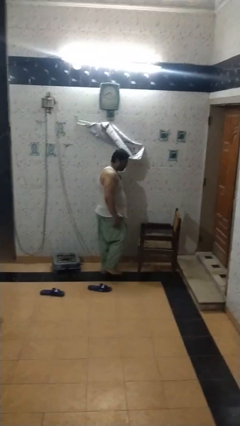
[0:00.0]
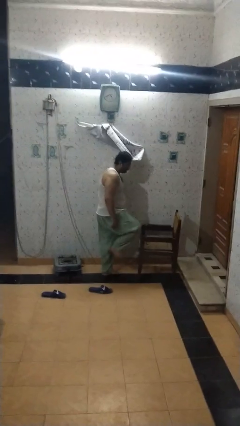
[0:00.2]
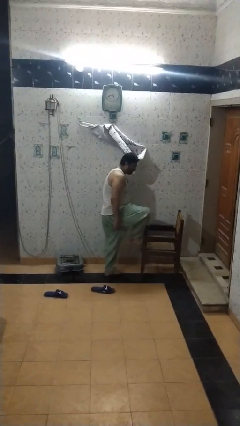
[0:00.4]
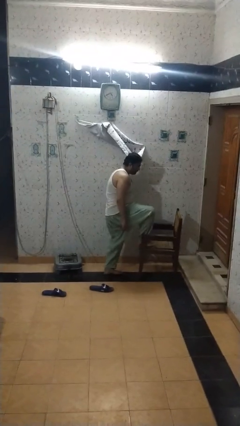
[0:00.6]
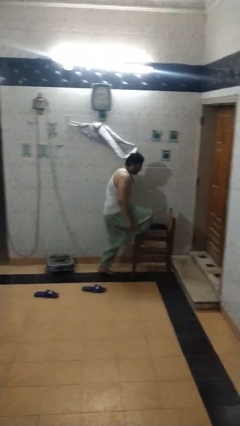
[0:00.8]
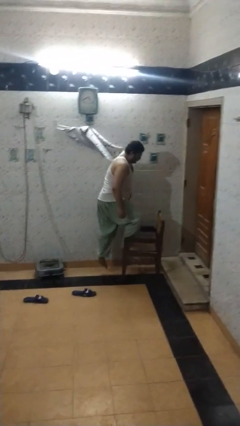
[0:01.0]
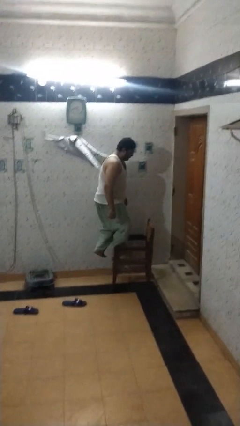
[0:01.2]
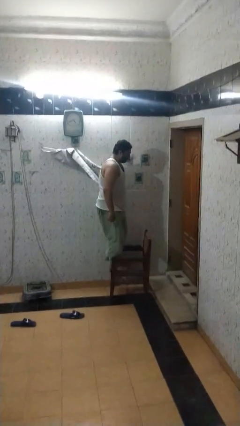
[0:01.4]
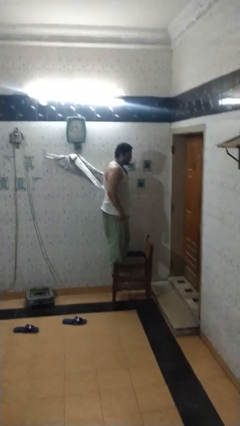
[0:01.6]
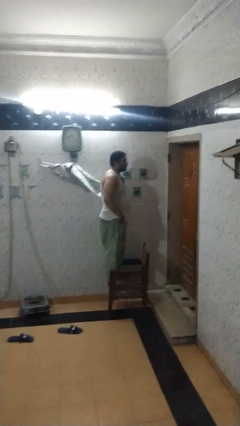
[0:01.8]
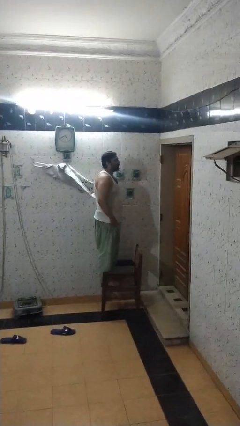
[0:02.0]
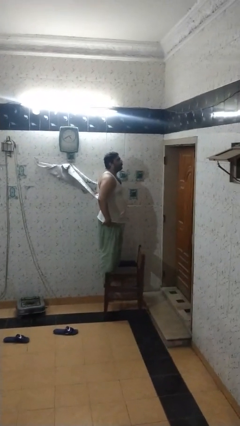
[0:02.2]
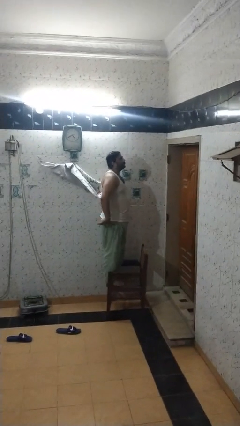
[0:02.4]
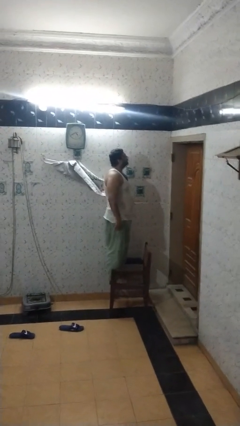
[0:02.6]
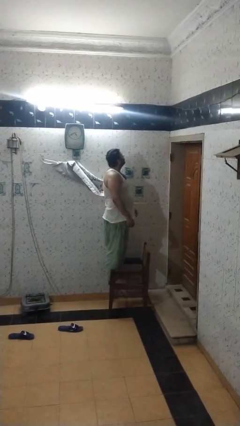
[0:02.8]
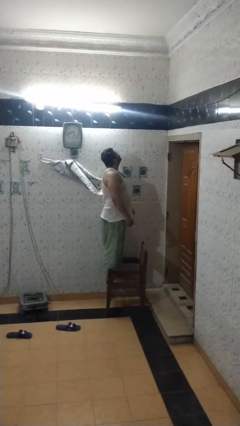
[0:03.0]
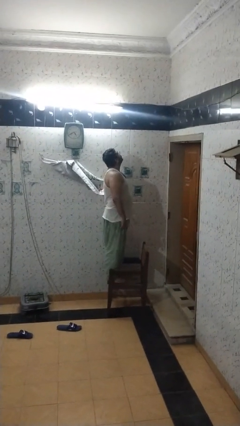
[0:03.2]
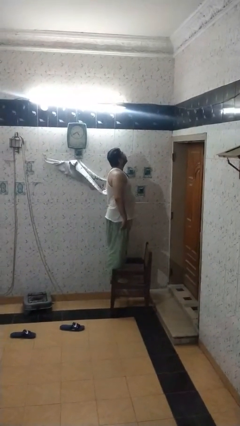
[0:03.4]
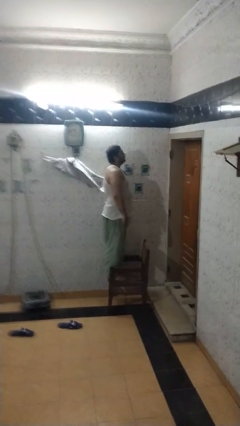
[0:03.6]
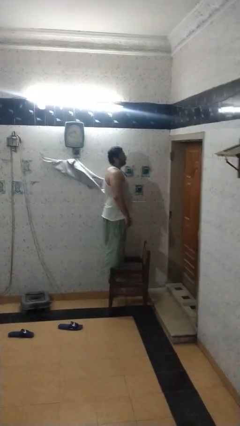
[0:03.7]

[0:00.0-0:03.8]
person climbs on chair

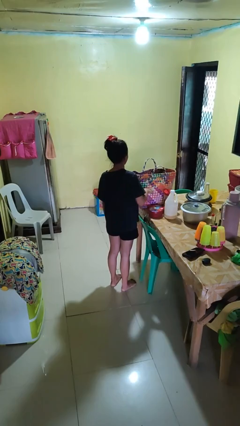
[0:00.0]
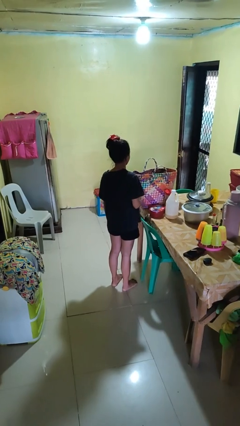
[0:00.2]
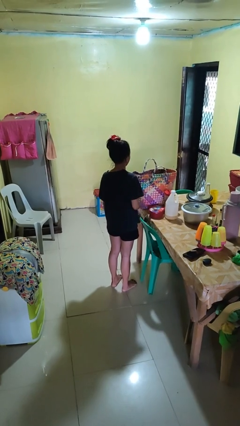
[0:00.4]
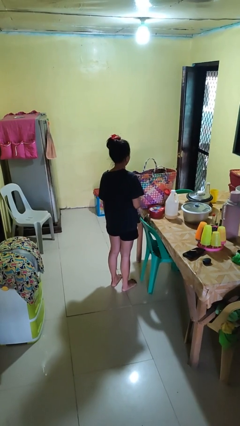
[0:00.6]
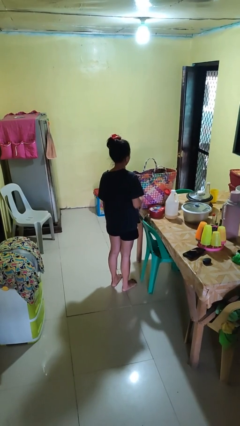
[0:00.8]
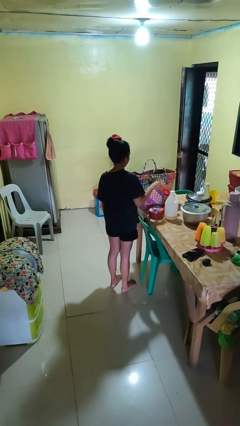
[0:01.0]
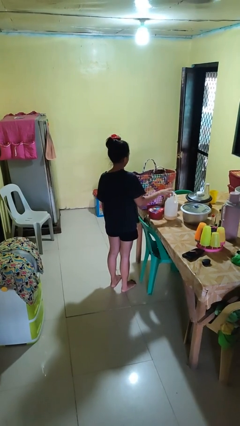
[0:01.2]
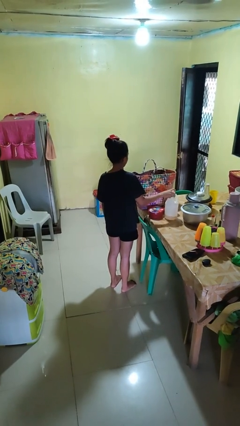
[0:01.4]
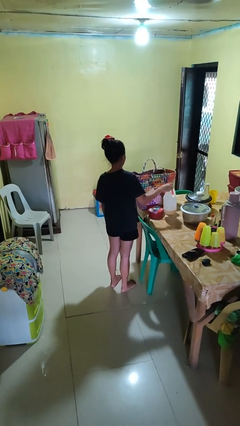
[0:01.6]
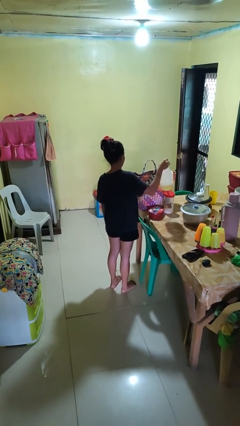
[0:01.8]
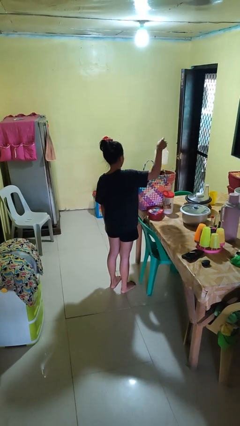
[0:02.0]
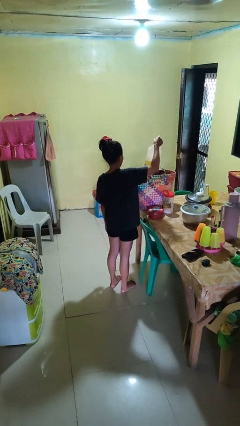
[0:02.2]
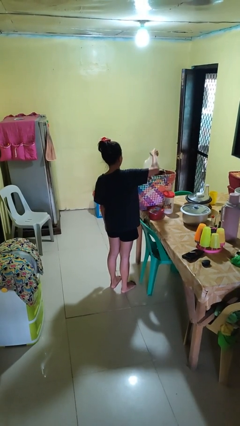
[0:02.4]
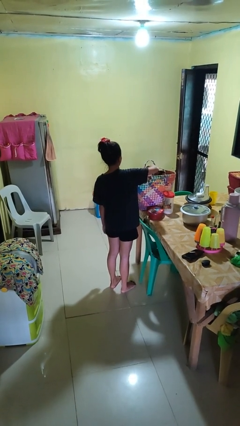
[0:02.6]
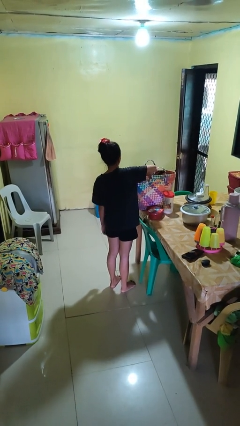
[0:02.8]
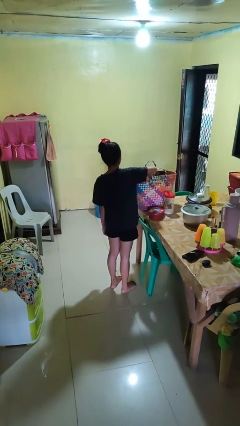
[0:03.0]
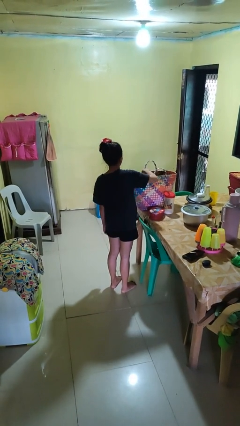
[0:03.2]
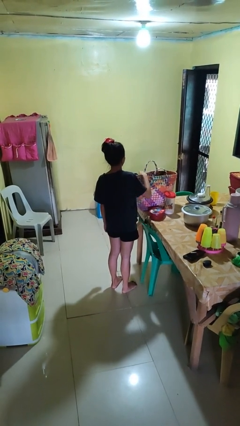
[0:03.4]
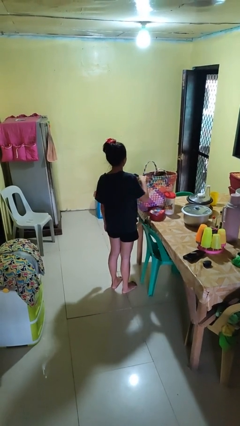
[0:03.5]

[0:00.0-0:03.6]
person puts object into basket

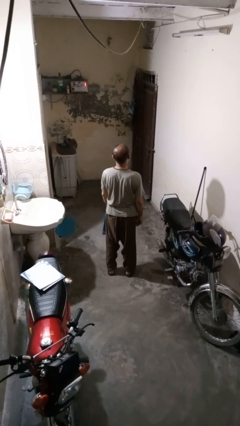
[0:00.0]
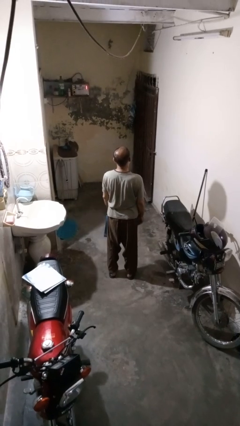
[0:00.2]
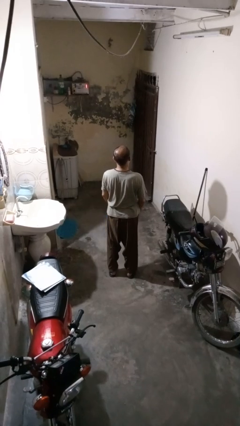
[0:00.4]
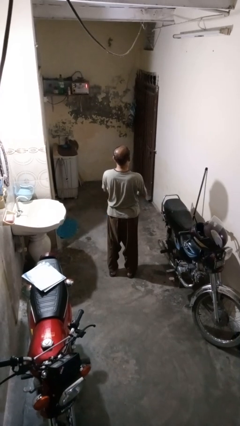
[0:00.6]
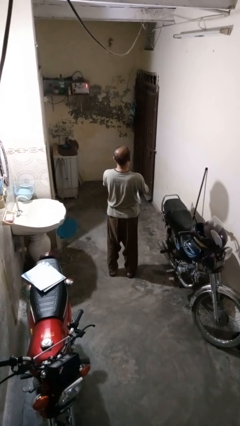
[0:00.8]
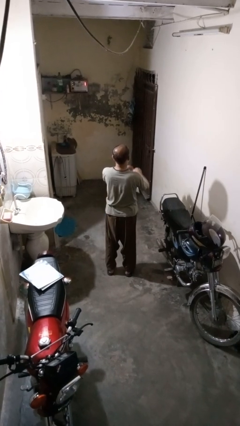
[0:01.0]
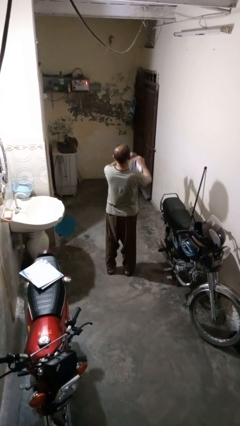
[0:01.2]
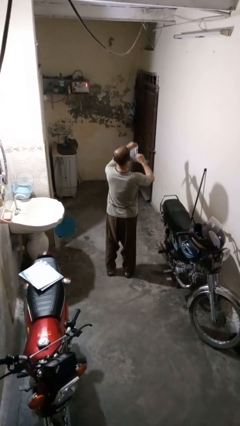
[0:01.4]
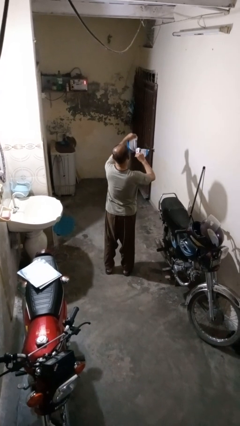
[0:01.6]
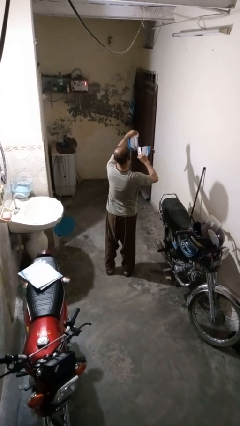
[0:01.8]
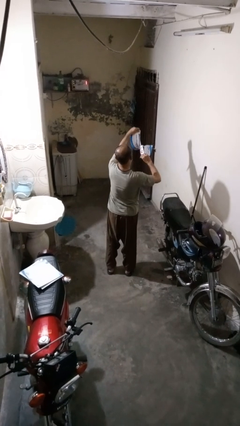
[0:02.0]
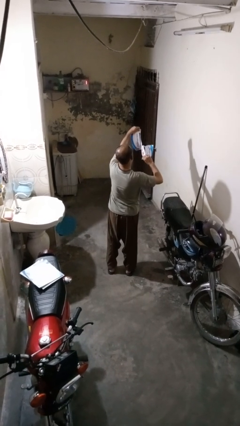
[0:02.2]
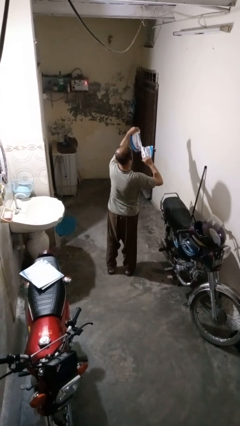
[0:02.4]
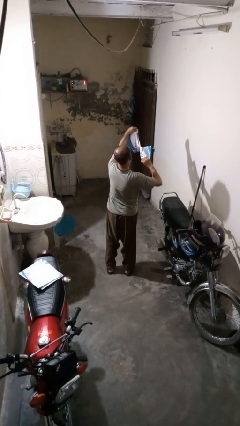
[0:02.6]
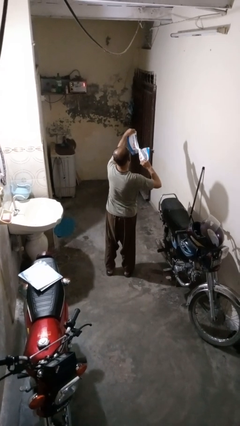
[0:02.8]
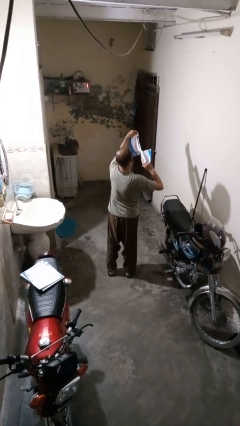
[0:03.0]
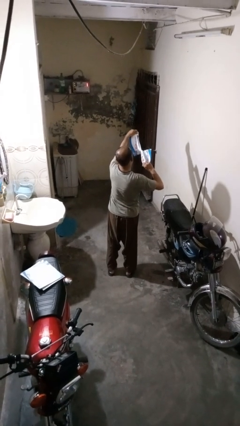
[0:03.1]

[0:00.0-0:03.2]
person tears paper

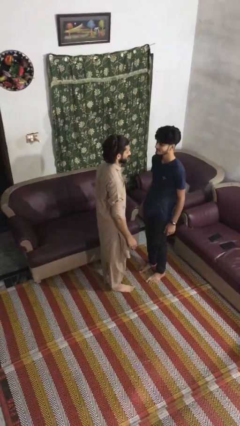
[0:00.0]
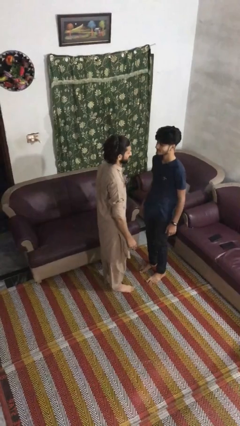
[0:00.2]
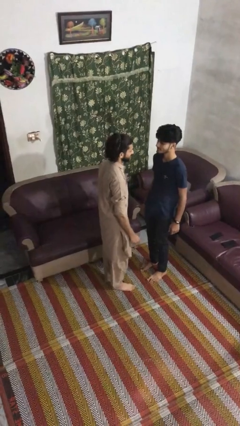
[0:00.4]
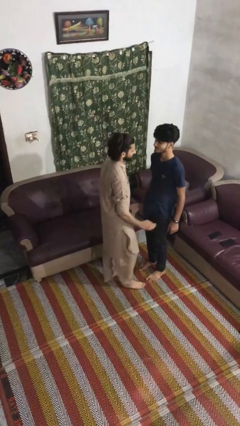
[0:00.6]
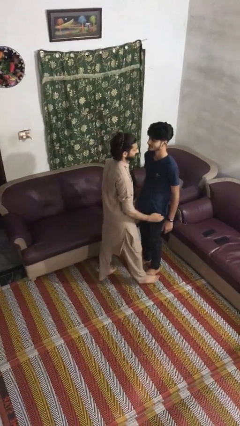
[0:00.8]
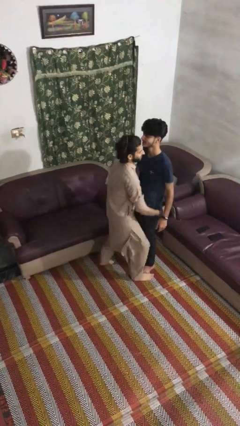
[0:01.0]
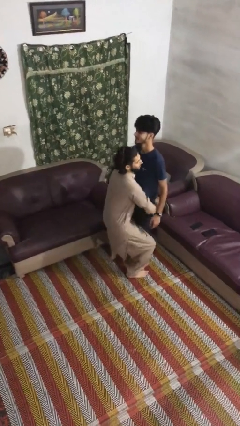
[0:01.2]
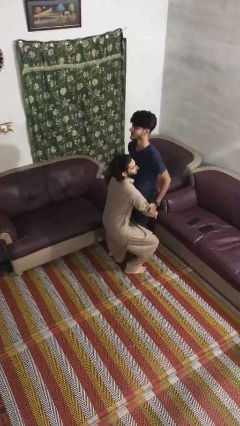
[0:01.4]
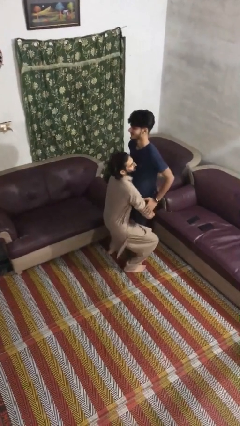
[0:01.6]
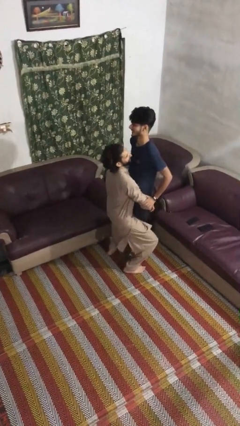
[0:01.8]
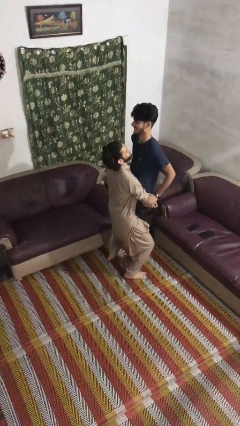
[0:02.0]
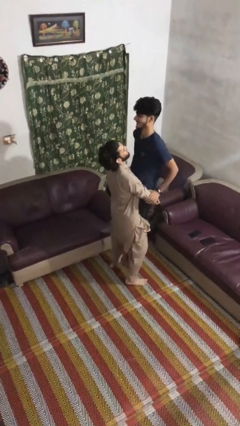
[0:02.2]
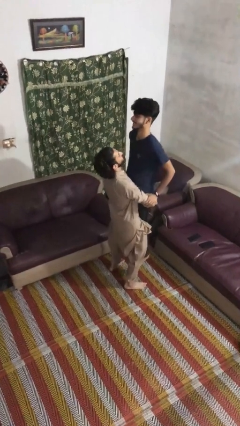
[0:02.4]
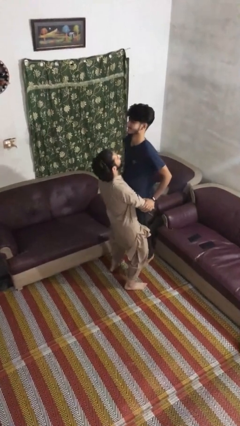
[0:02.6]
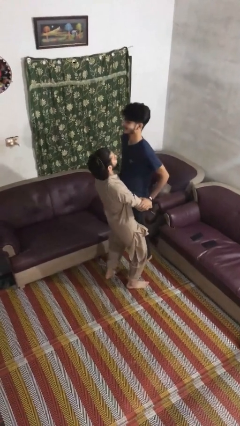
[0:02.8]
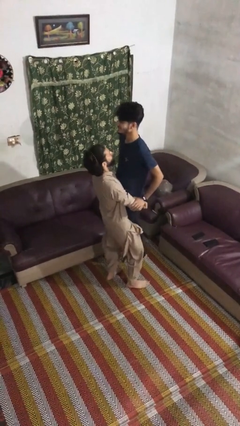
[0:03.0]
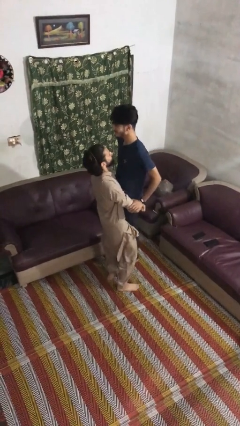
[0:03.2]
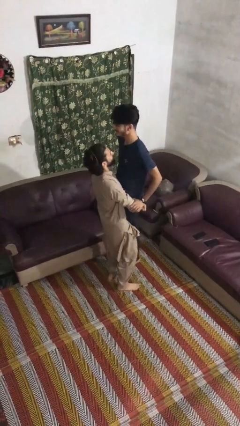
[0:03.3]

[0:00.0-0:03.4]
person picks up person

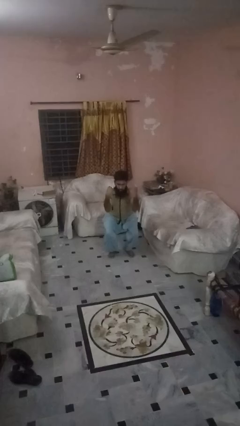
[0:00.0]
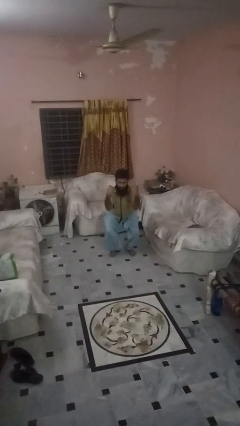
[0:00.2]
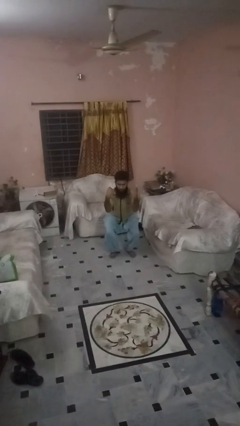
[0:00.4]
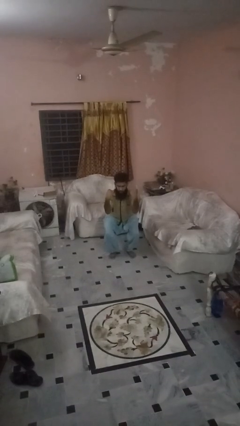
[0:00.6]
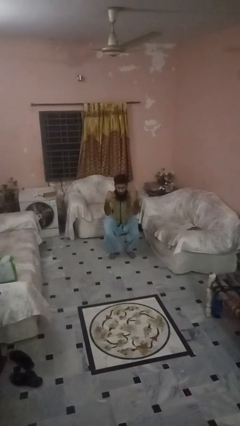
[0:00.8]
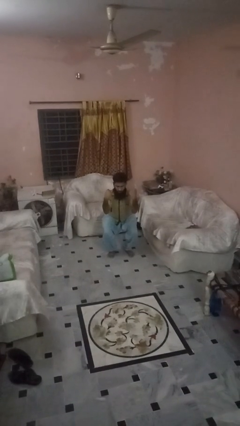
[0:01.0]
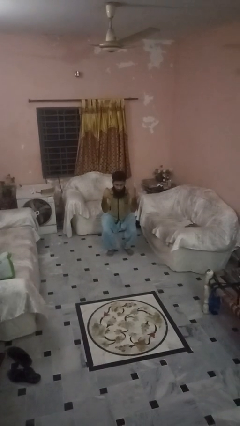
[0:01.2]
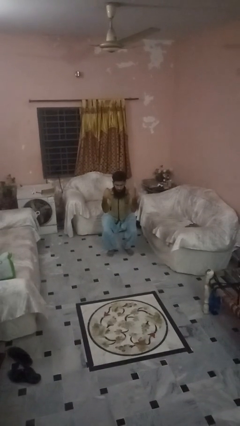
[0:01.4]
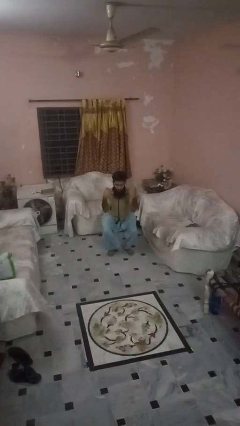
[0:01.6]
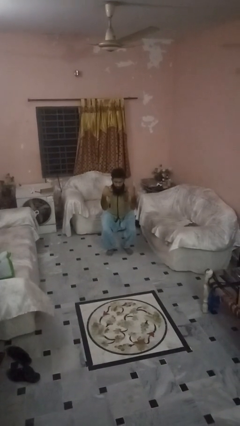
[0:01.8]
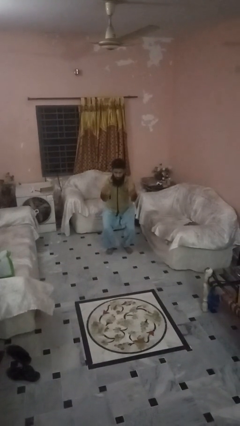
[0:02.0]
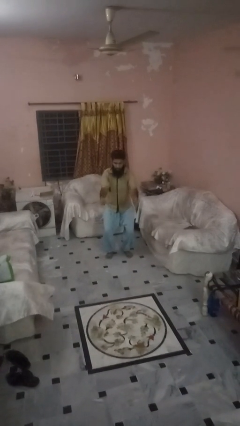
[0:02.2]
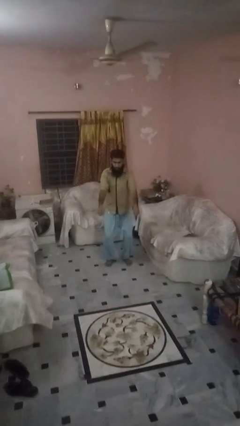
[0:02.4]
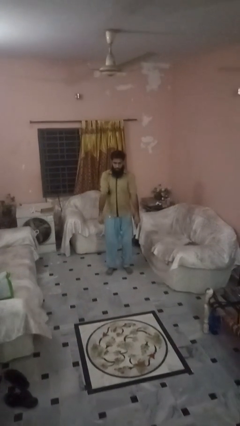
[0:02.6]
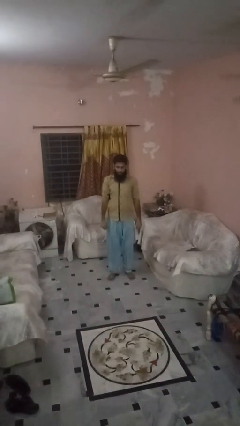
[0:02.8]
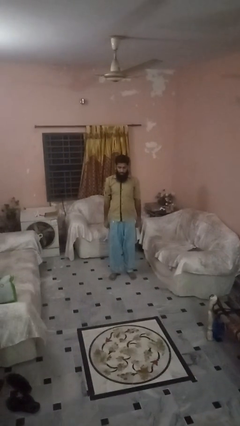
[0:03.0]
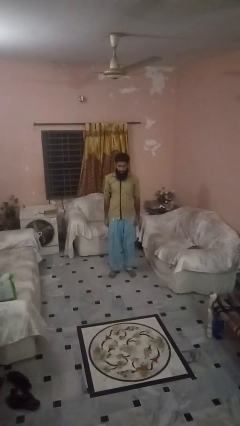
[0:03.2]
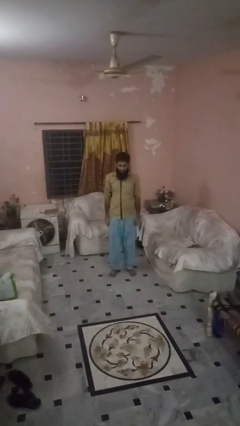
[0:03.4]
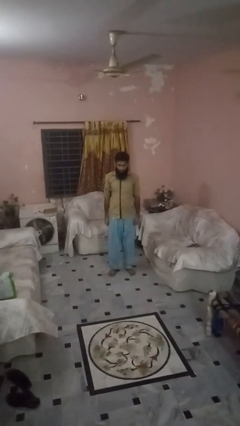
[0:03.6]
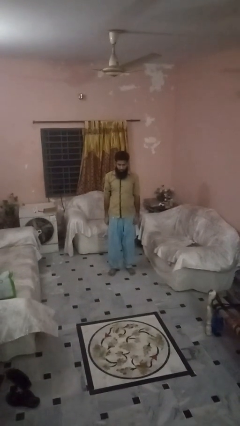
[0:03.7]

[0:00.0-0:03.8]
person stands up
